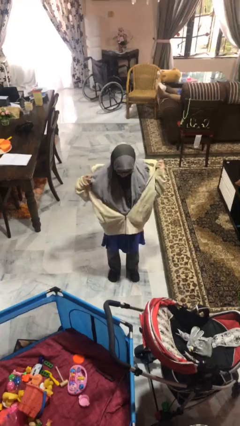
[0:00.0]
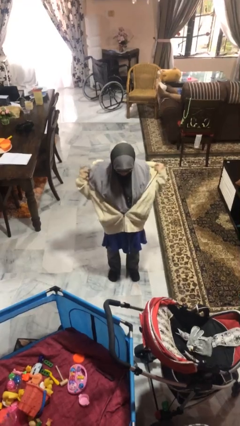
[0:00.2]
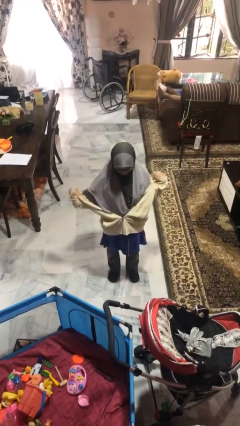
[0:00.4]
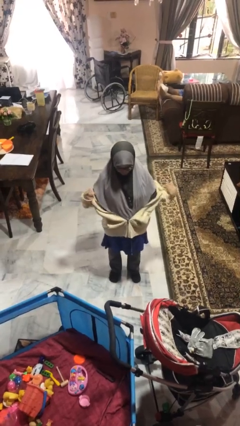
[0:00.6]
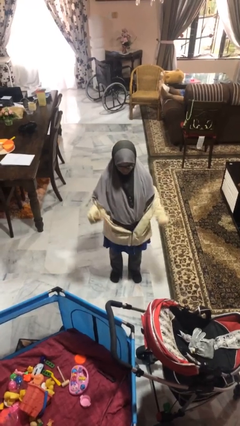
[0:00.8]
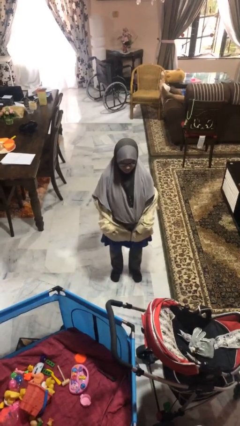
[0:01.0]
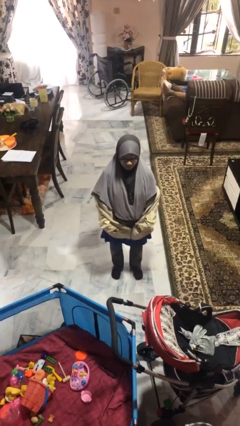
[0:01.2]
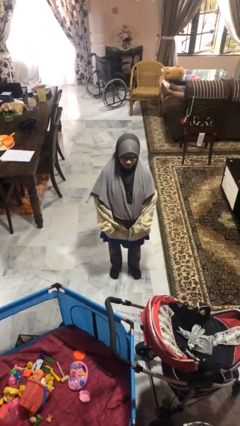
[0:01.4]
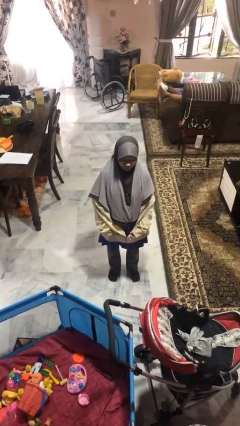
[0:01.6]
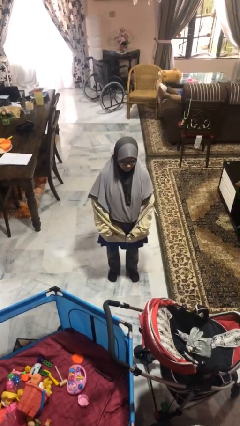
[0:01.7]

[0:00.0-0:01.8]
person takes off jacket

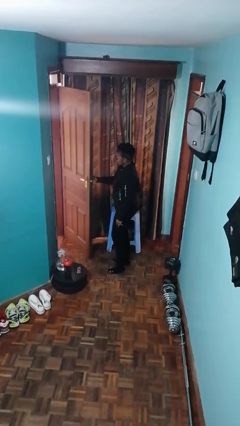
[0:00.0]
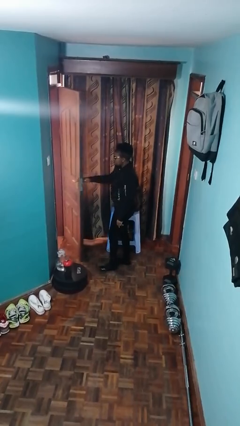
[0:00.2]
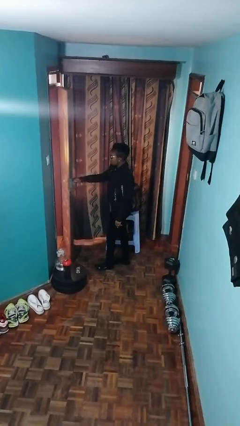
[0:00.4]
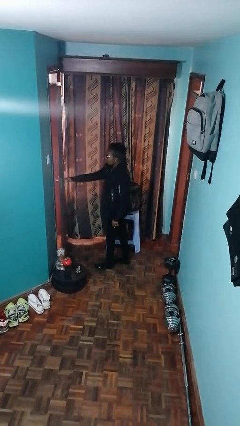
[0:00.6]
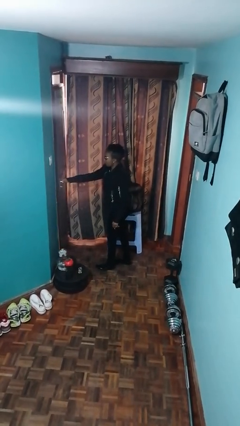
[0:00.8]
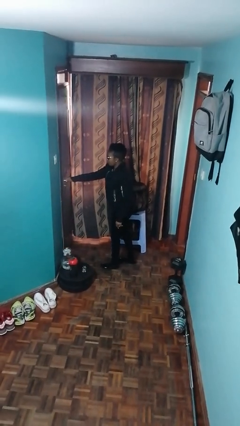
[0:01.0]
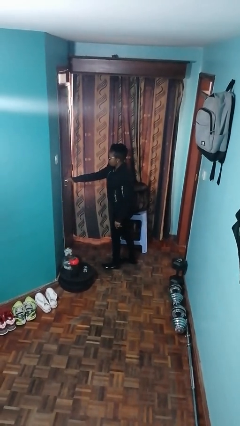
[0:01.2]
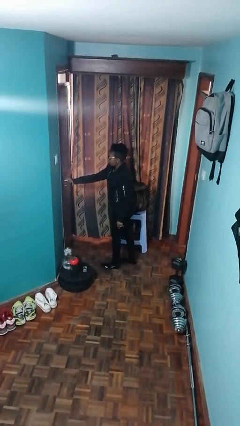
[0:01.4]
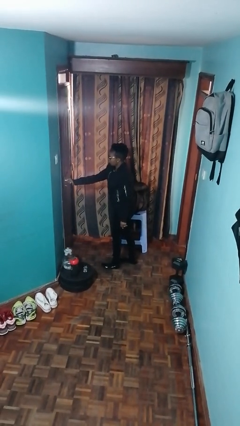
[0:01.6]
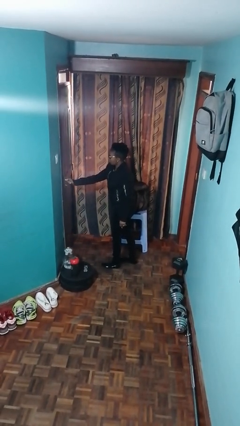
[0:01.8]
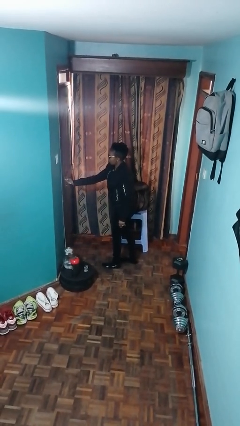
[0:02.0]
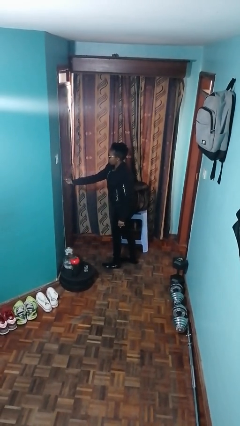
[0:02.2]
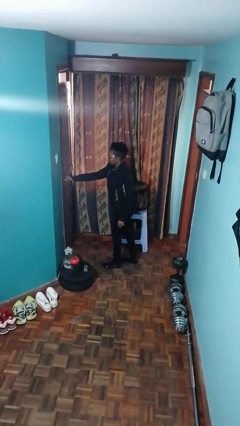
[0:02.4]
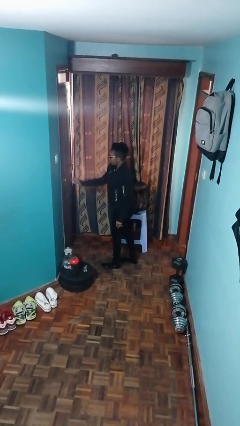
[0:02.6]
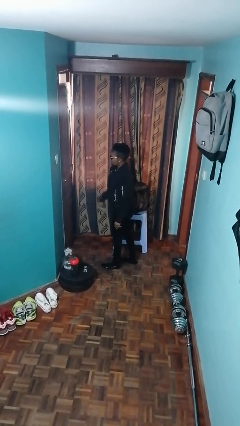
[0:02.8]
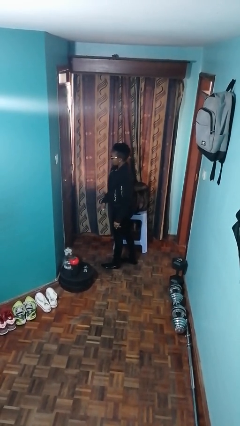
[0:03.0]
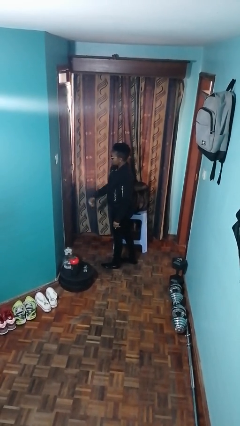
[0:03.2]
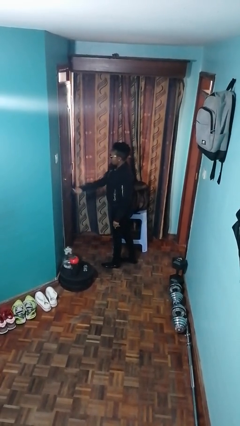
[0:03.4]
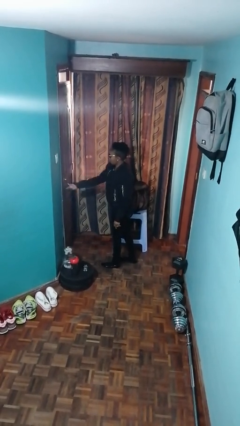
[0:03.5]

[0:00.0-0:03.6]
person closes facility door

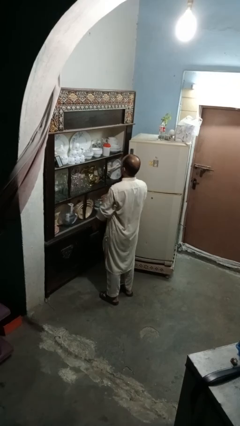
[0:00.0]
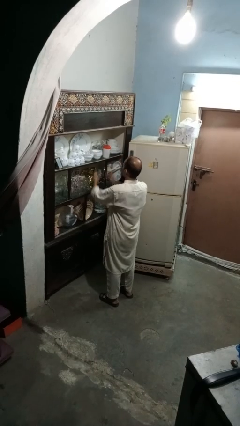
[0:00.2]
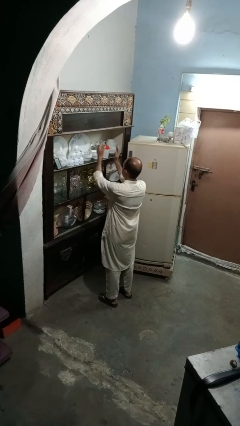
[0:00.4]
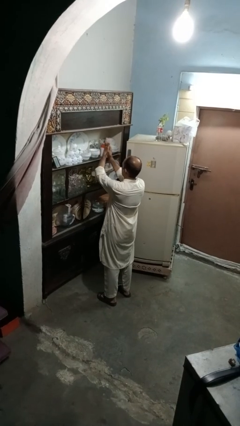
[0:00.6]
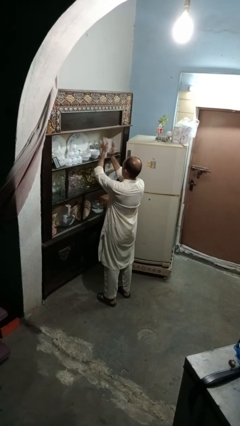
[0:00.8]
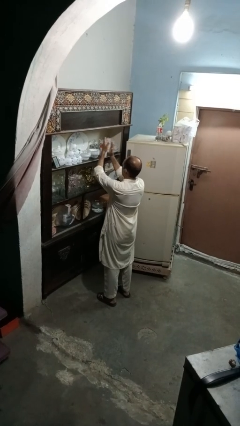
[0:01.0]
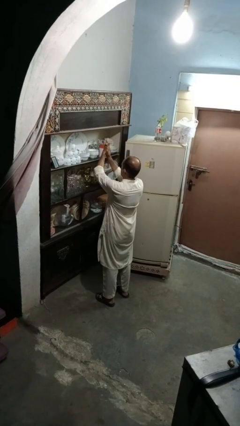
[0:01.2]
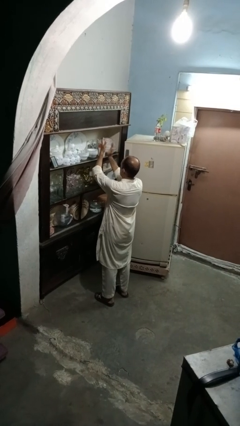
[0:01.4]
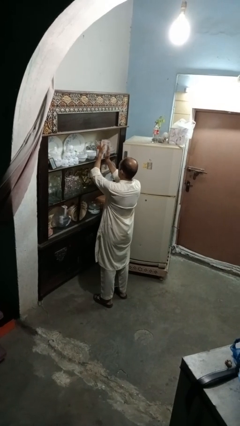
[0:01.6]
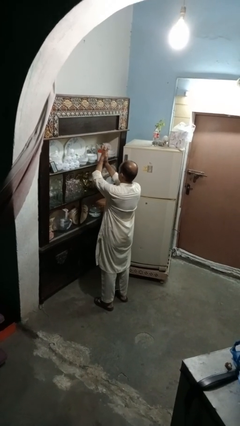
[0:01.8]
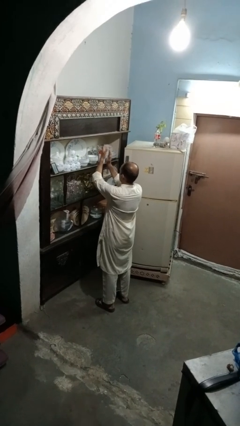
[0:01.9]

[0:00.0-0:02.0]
person claps hands

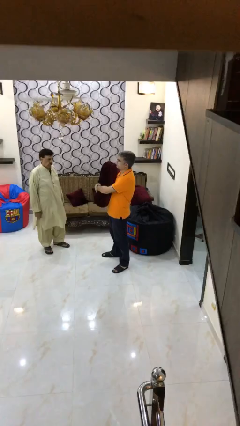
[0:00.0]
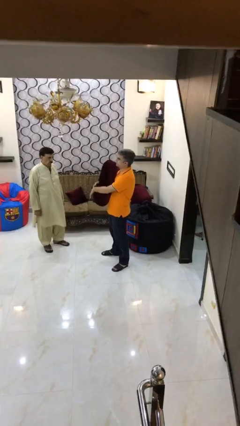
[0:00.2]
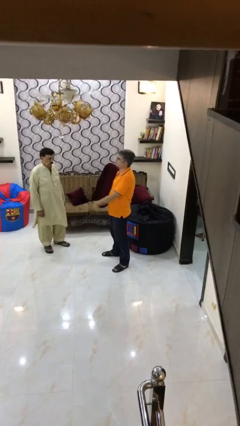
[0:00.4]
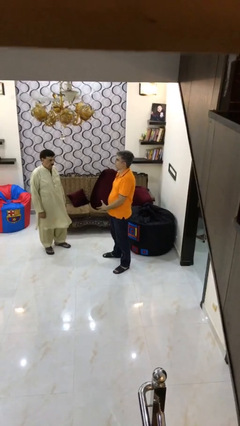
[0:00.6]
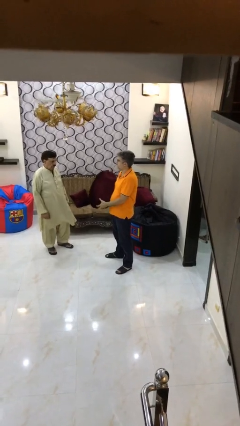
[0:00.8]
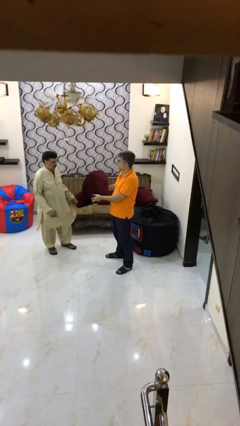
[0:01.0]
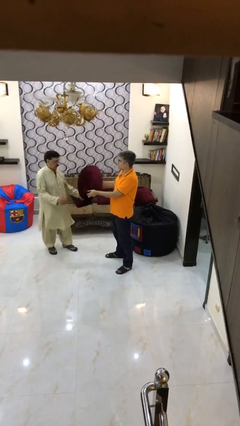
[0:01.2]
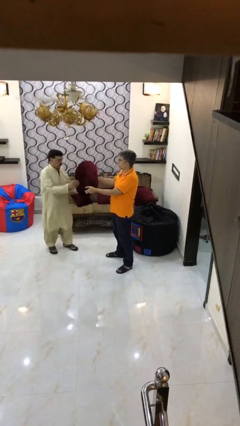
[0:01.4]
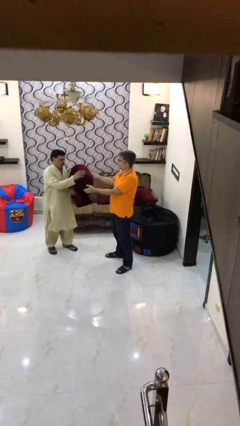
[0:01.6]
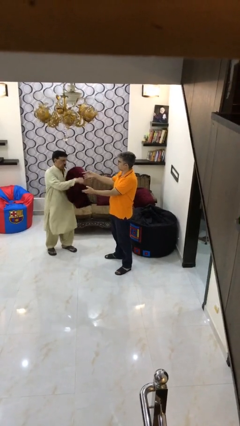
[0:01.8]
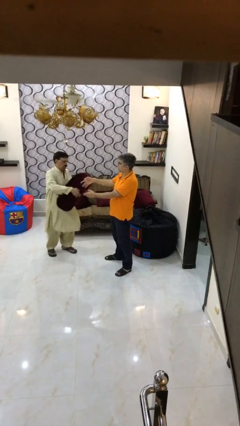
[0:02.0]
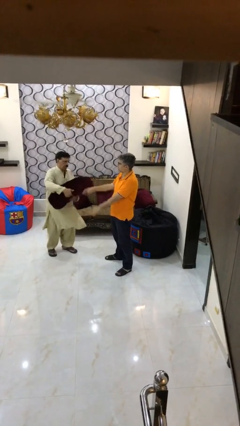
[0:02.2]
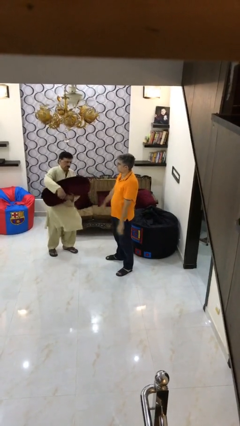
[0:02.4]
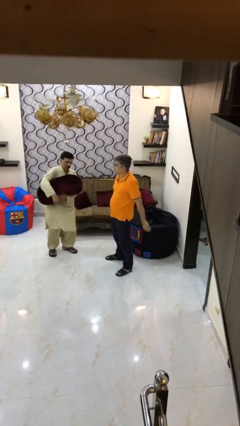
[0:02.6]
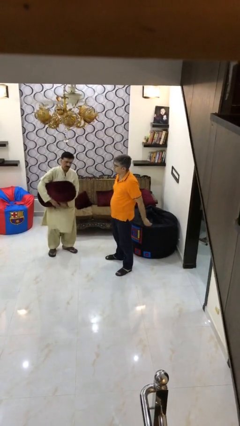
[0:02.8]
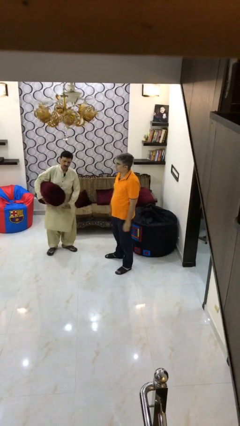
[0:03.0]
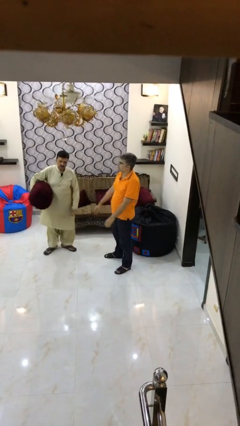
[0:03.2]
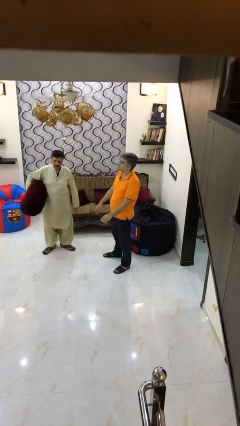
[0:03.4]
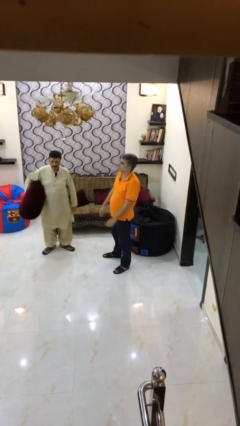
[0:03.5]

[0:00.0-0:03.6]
person transfers object to person

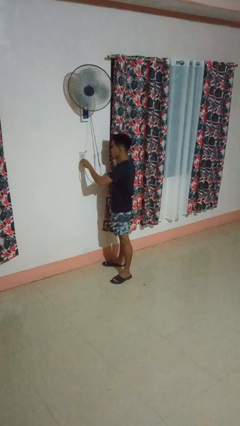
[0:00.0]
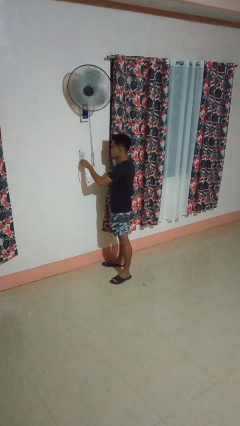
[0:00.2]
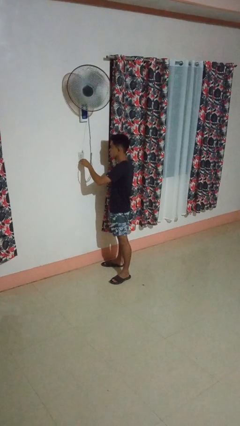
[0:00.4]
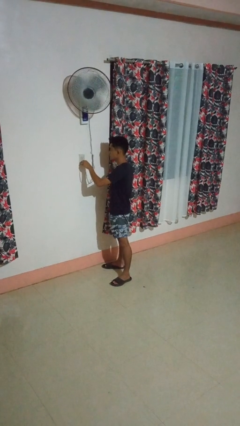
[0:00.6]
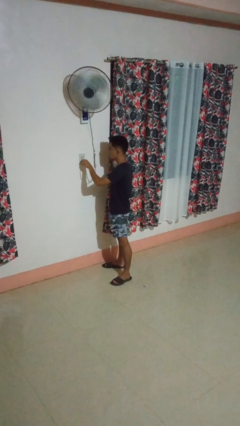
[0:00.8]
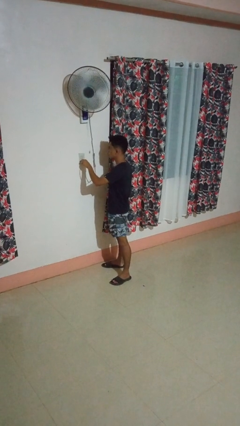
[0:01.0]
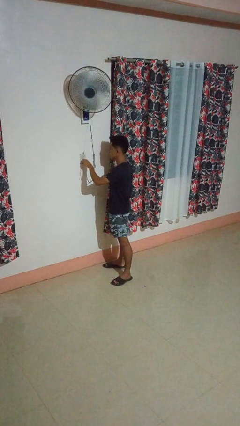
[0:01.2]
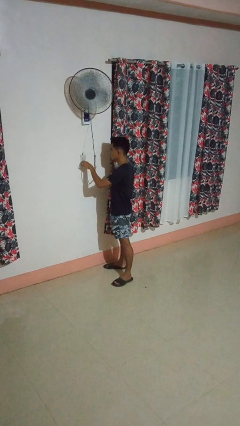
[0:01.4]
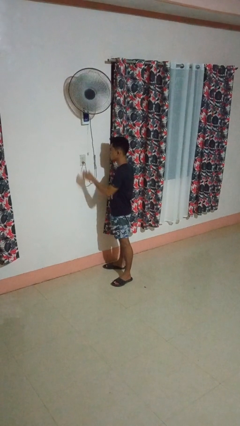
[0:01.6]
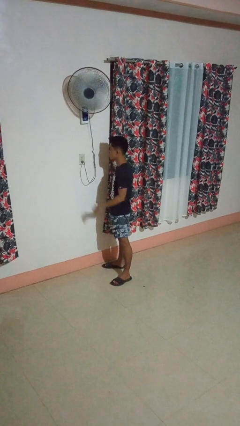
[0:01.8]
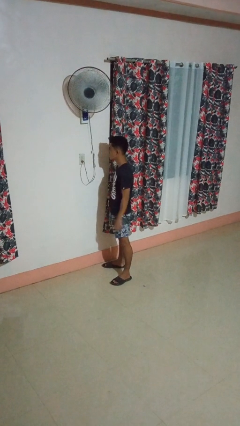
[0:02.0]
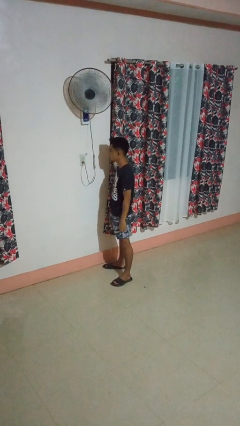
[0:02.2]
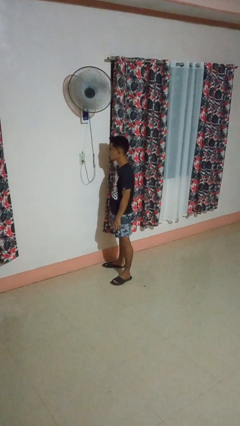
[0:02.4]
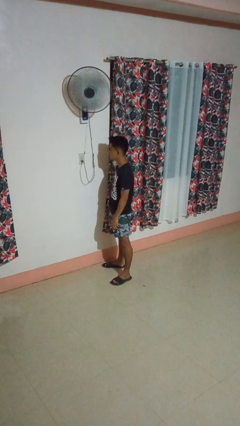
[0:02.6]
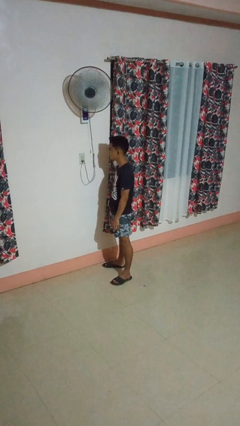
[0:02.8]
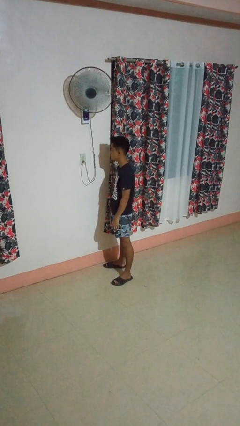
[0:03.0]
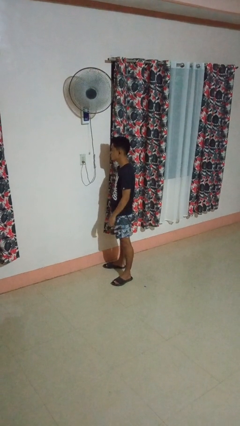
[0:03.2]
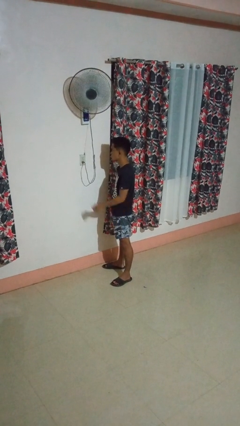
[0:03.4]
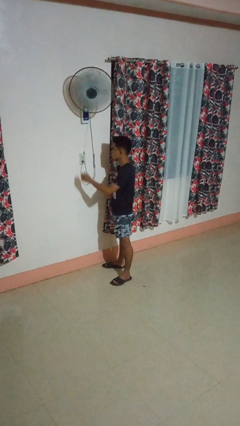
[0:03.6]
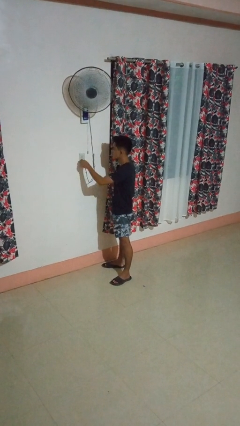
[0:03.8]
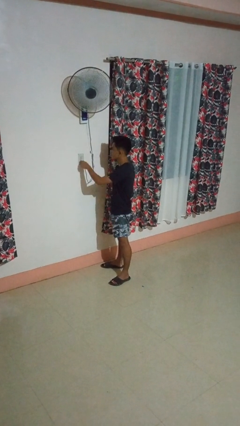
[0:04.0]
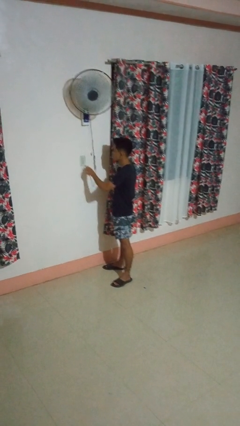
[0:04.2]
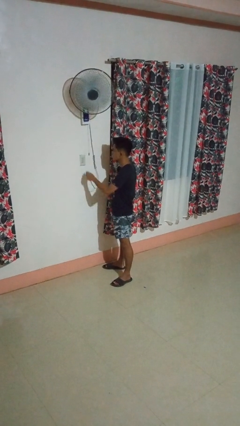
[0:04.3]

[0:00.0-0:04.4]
person plugs into electrical socket

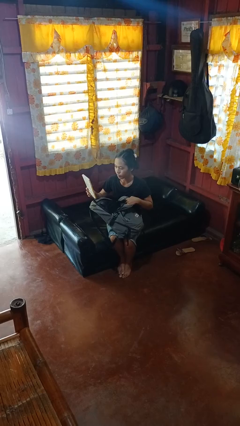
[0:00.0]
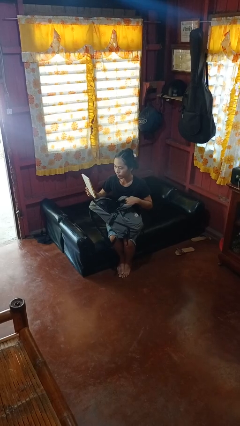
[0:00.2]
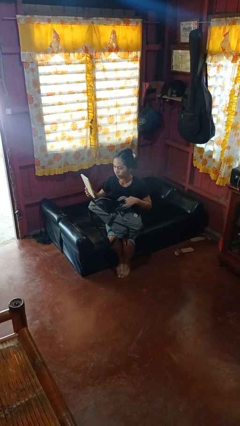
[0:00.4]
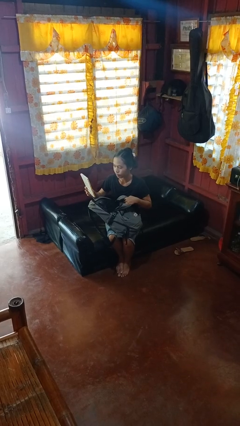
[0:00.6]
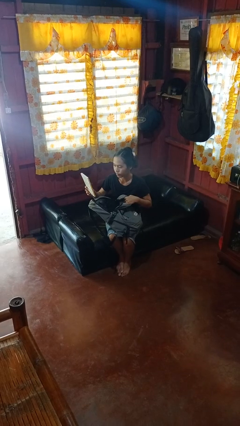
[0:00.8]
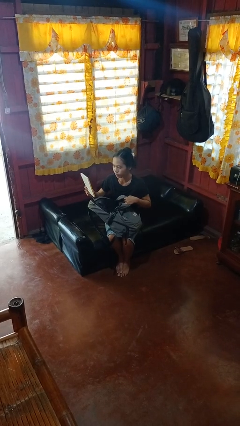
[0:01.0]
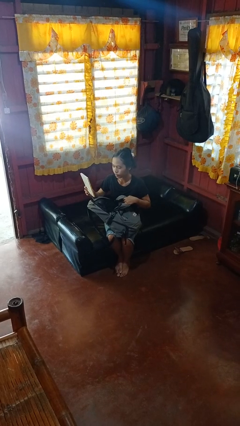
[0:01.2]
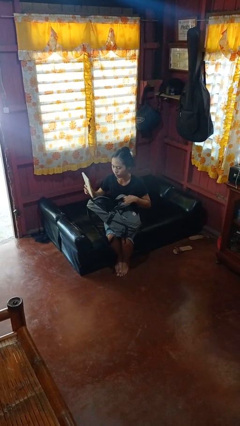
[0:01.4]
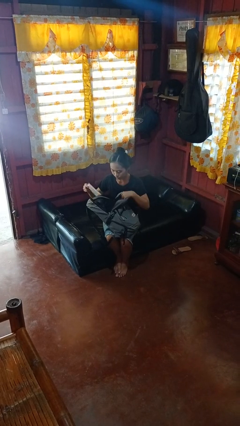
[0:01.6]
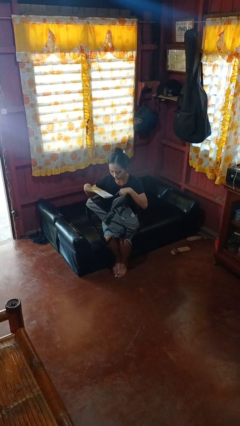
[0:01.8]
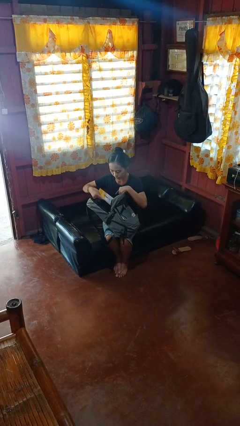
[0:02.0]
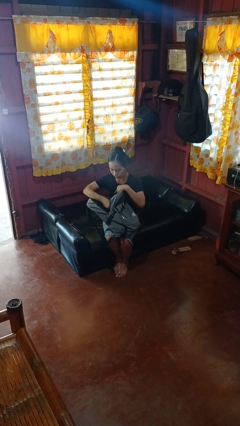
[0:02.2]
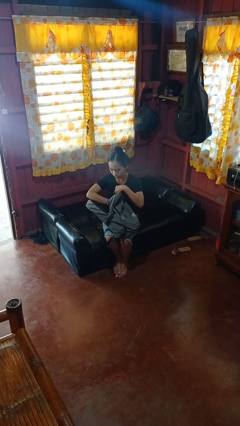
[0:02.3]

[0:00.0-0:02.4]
person takes object from backpack
